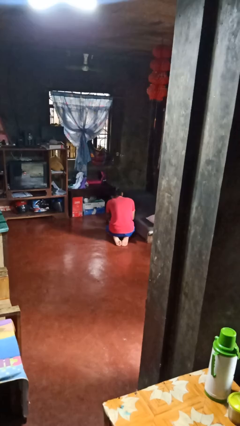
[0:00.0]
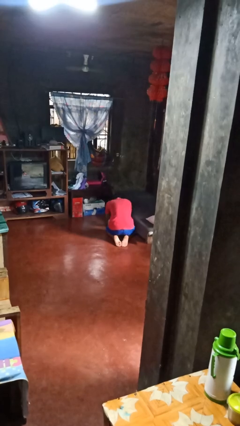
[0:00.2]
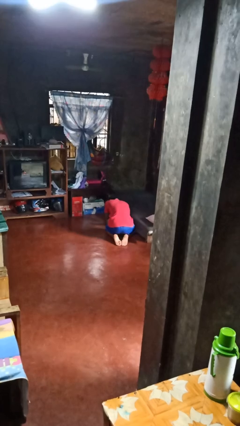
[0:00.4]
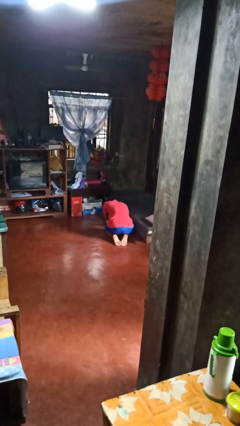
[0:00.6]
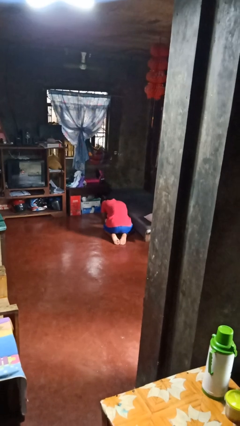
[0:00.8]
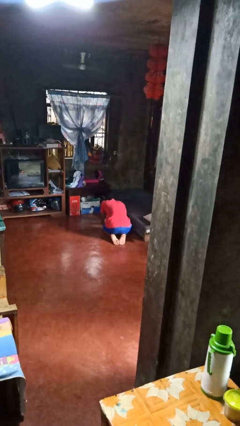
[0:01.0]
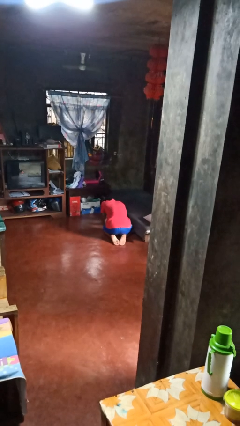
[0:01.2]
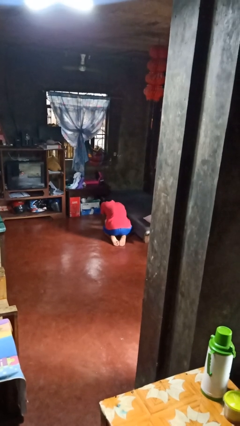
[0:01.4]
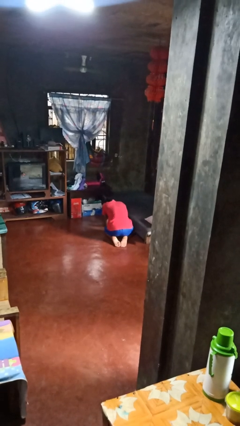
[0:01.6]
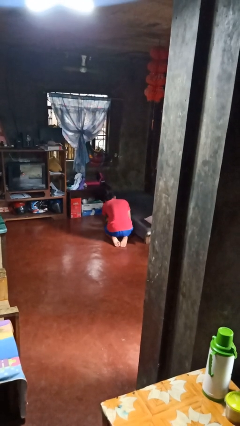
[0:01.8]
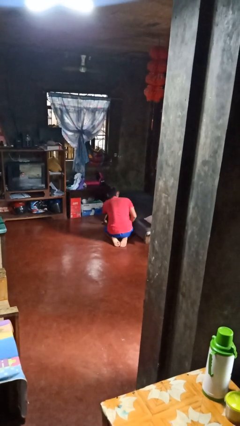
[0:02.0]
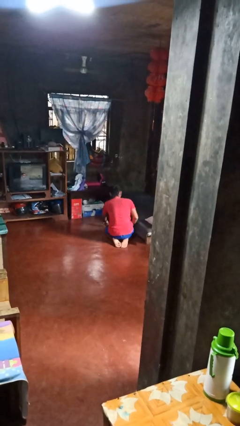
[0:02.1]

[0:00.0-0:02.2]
person searches under bed

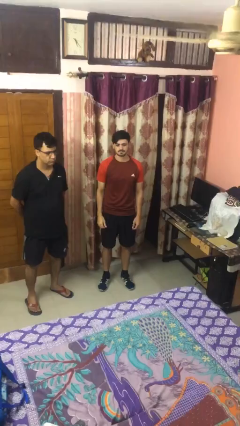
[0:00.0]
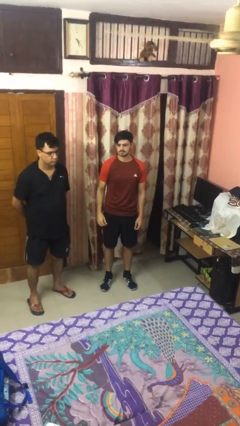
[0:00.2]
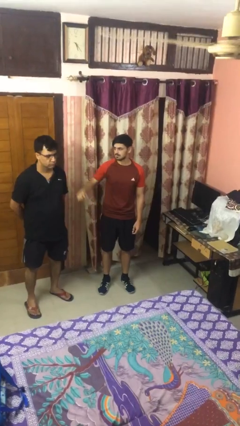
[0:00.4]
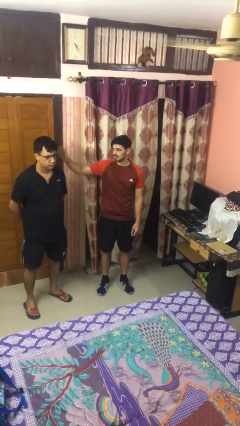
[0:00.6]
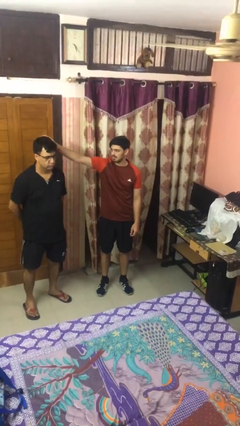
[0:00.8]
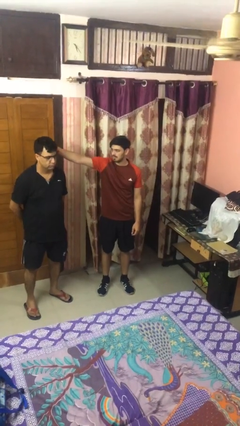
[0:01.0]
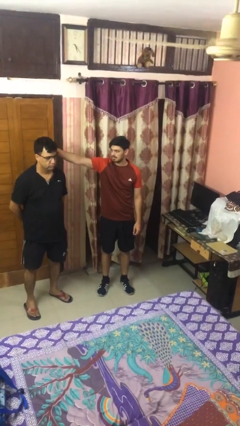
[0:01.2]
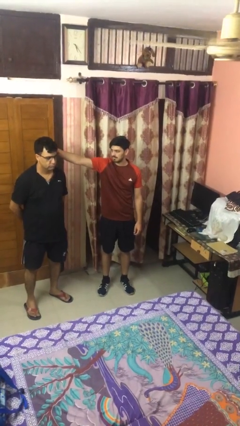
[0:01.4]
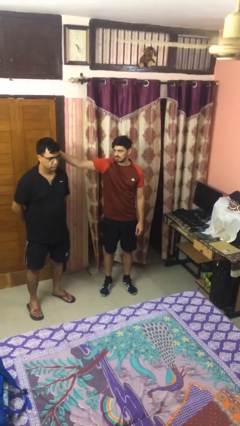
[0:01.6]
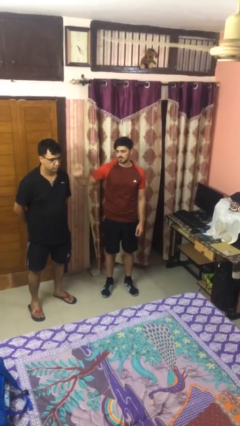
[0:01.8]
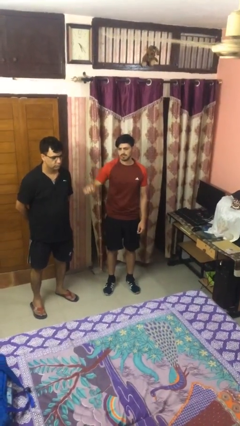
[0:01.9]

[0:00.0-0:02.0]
person grabs person by hair

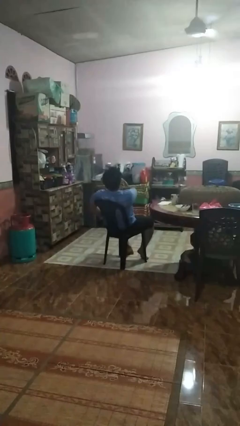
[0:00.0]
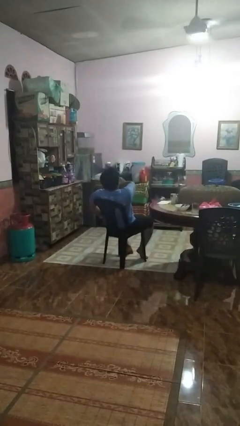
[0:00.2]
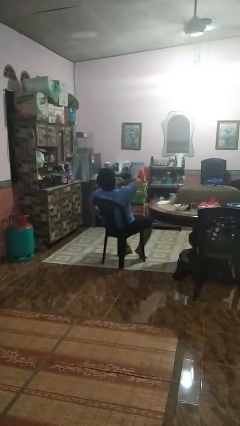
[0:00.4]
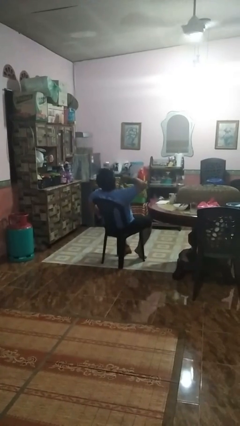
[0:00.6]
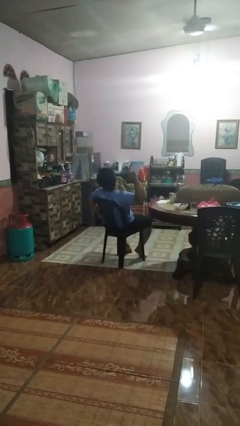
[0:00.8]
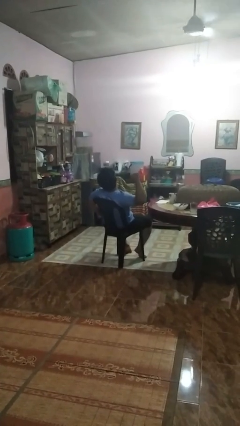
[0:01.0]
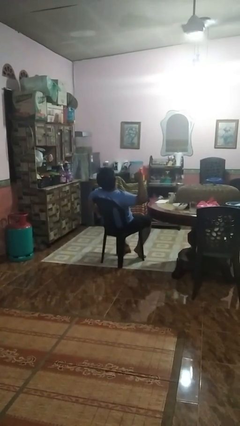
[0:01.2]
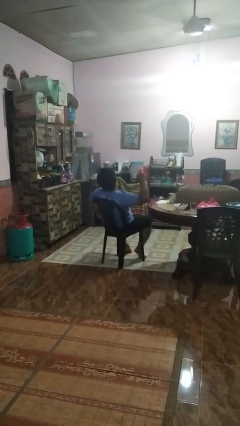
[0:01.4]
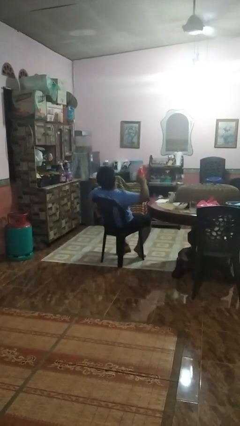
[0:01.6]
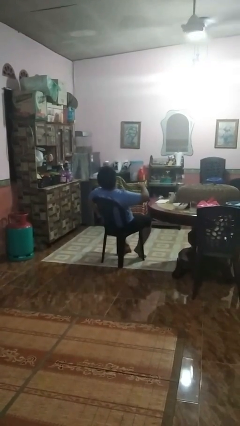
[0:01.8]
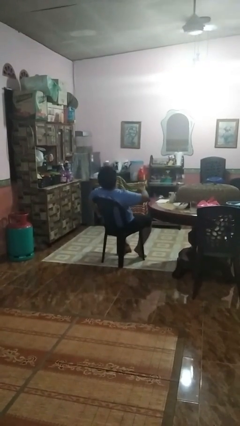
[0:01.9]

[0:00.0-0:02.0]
person gestures cut

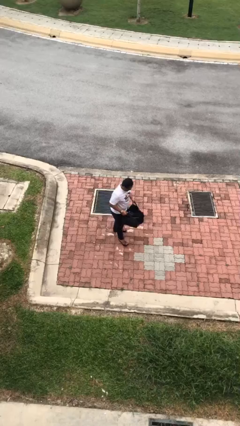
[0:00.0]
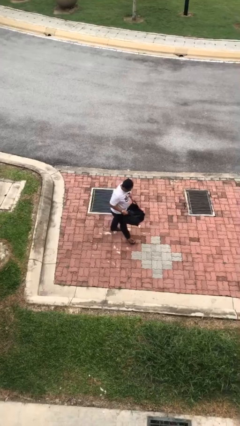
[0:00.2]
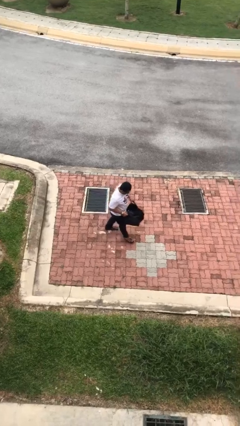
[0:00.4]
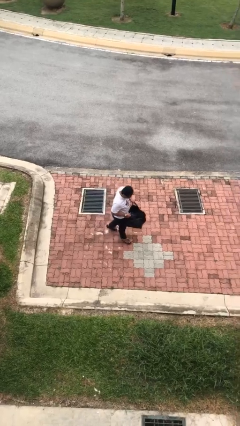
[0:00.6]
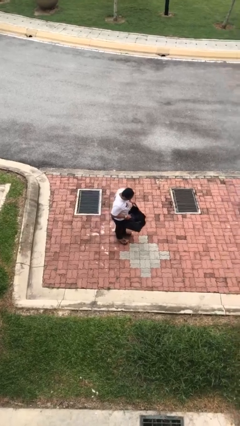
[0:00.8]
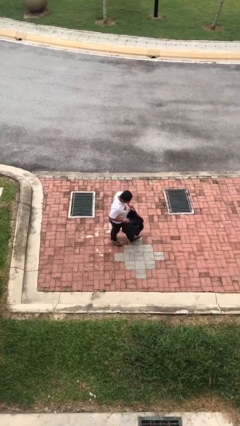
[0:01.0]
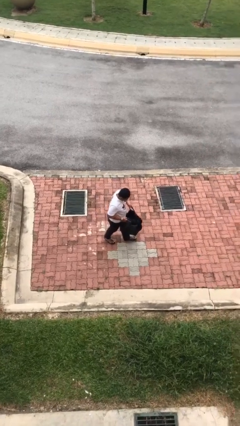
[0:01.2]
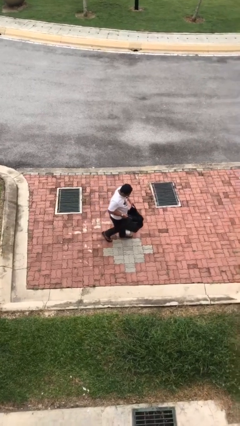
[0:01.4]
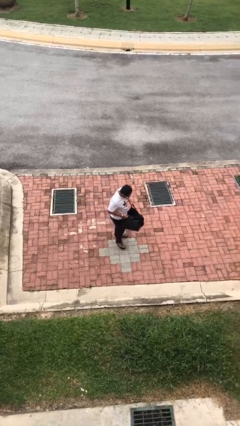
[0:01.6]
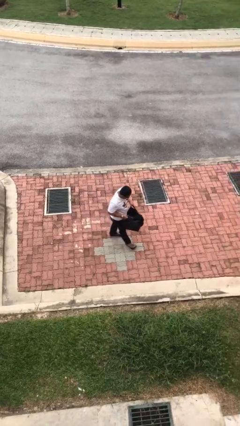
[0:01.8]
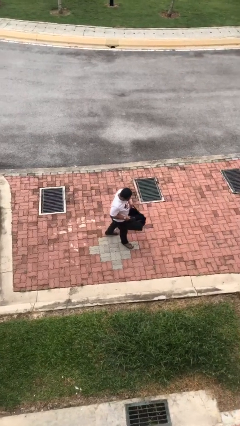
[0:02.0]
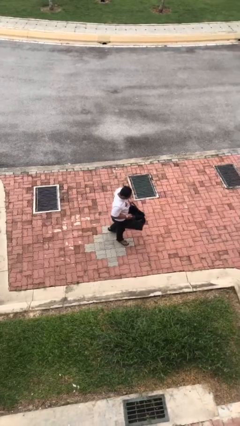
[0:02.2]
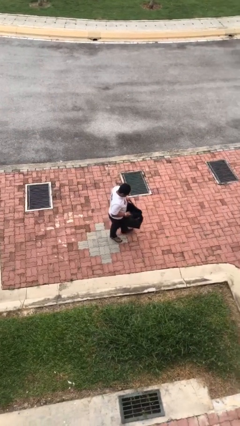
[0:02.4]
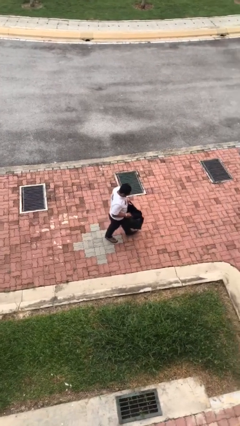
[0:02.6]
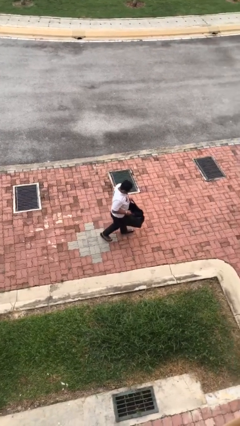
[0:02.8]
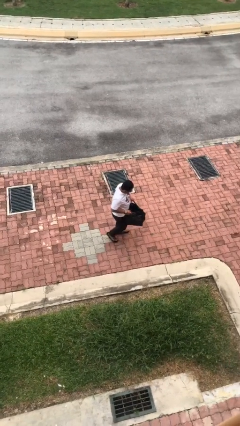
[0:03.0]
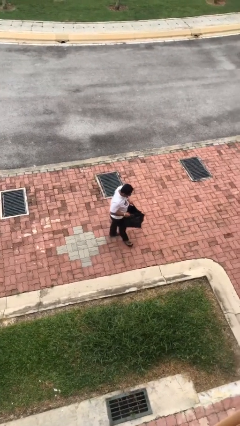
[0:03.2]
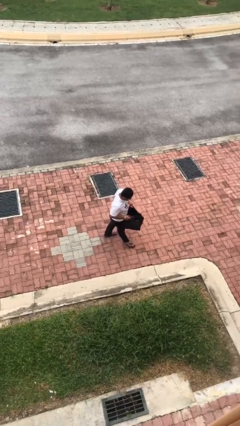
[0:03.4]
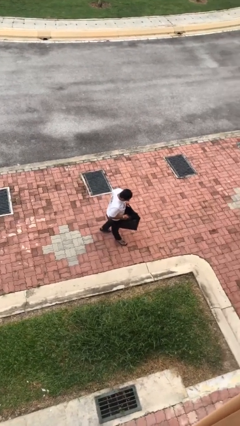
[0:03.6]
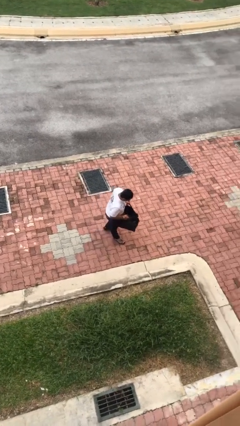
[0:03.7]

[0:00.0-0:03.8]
person carries heavy object

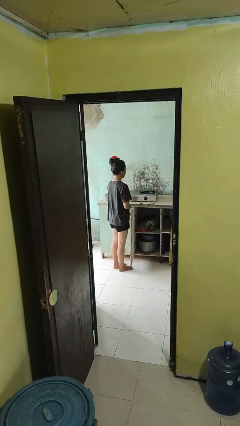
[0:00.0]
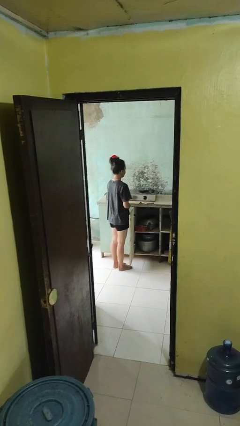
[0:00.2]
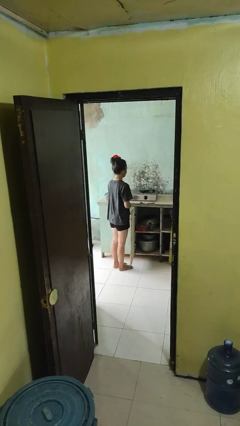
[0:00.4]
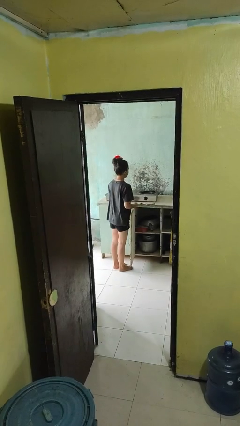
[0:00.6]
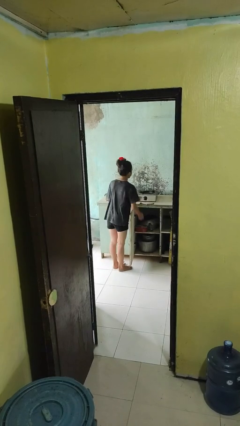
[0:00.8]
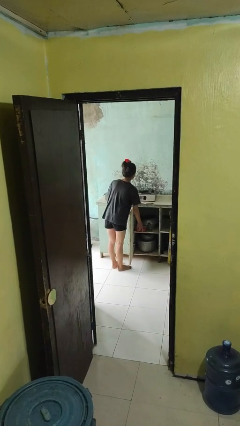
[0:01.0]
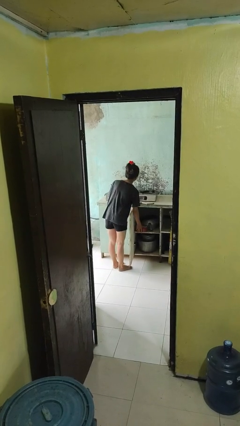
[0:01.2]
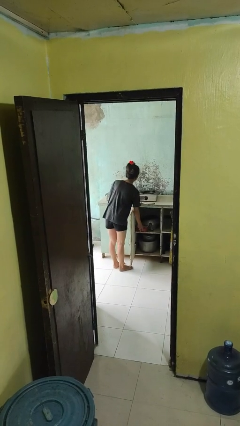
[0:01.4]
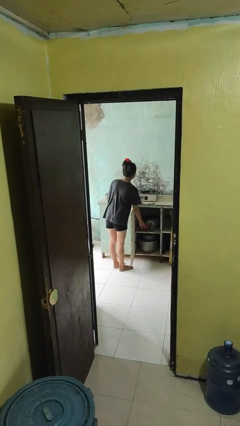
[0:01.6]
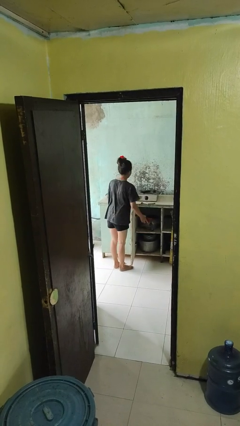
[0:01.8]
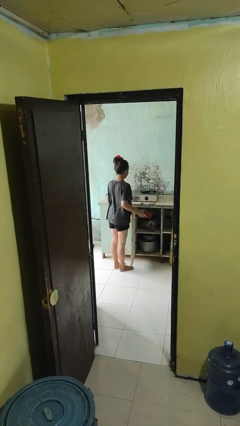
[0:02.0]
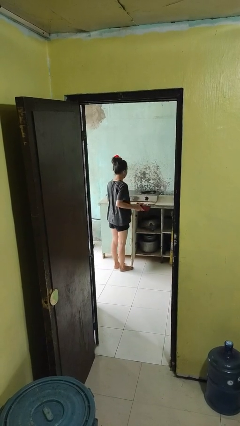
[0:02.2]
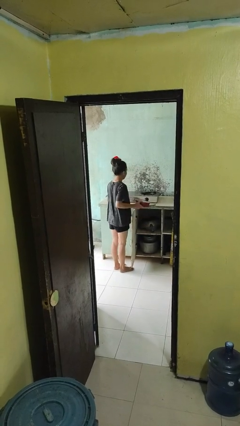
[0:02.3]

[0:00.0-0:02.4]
person takes object from cabinet

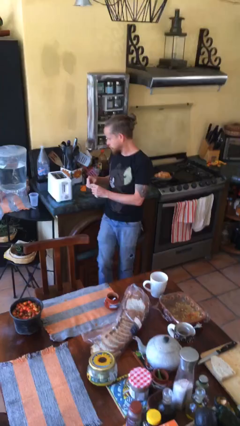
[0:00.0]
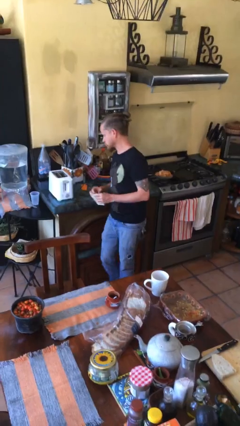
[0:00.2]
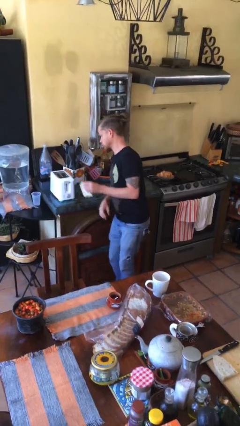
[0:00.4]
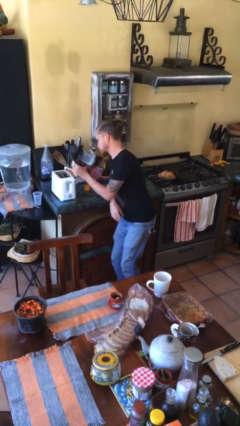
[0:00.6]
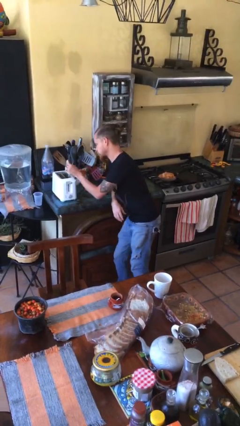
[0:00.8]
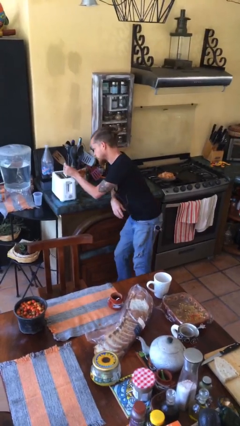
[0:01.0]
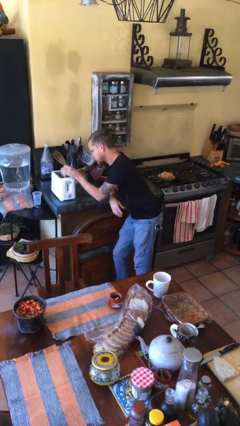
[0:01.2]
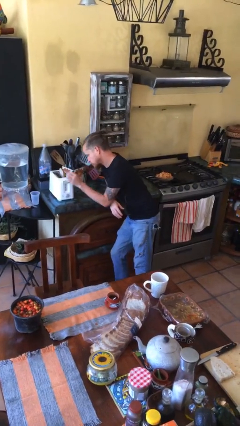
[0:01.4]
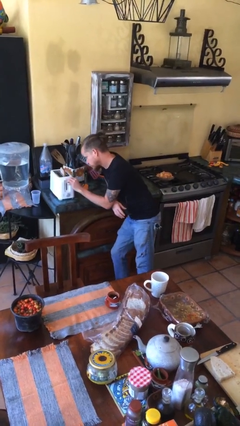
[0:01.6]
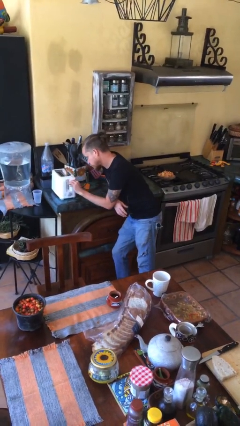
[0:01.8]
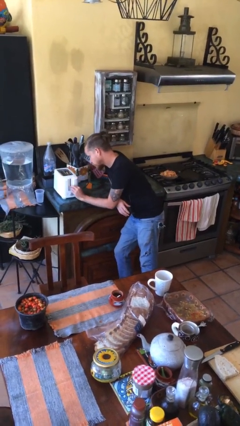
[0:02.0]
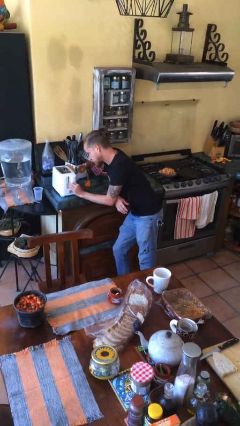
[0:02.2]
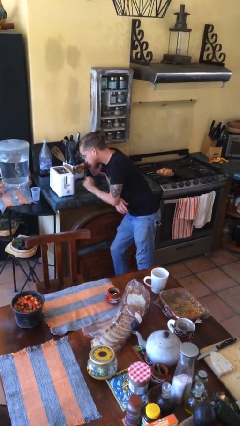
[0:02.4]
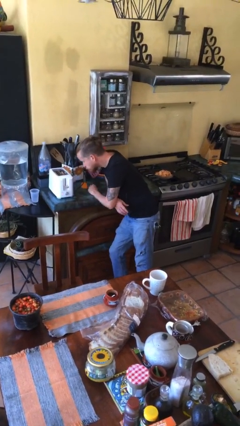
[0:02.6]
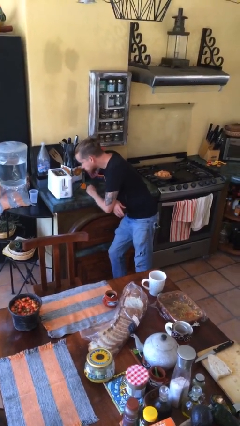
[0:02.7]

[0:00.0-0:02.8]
person puts object into toaster

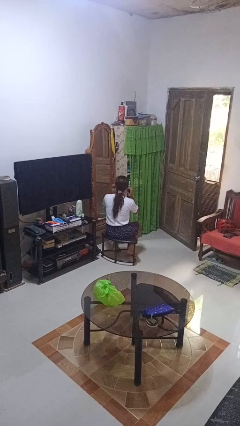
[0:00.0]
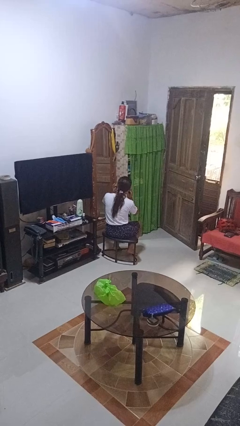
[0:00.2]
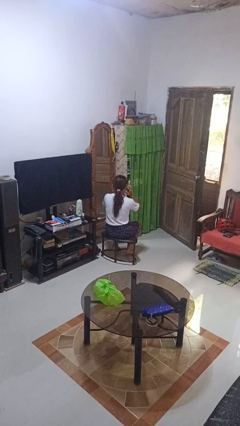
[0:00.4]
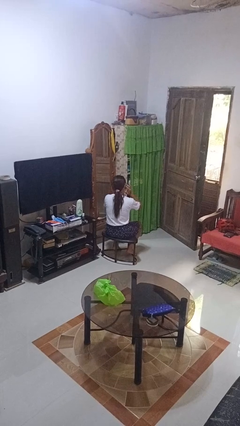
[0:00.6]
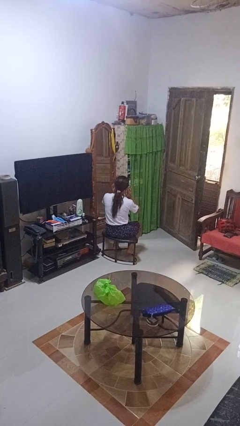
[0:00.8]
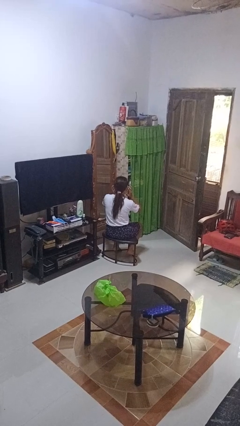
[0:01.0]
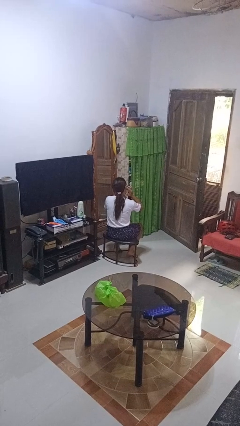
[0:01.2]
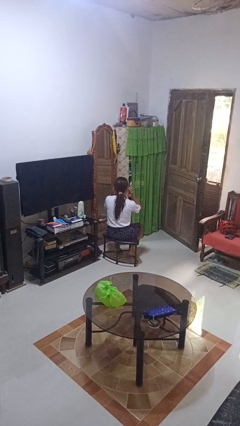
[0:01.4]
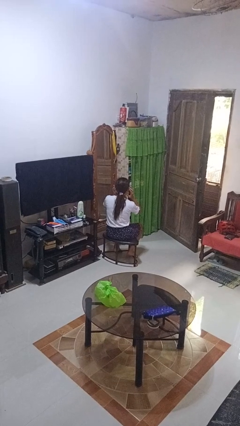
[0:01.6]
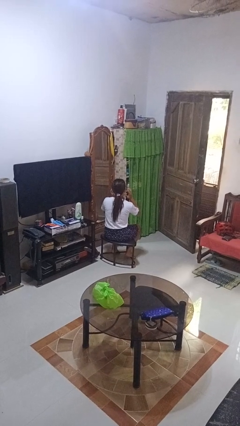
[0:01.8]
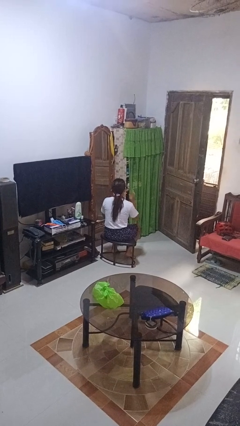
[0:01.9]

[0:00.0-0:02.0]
person puts fingers in ear

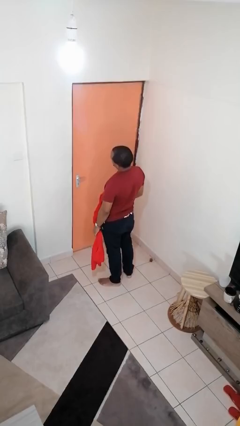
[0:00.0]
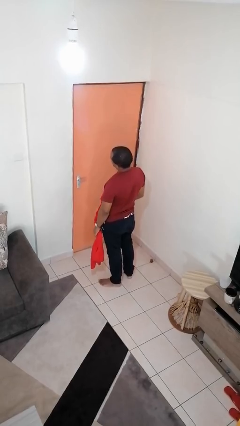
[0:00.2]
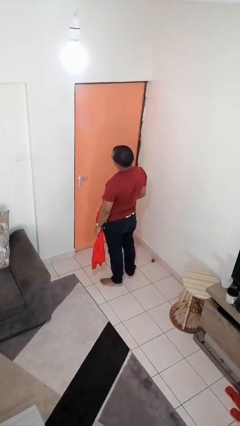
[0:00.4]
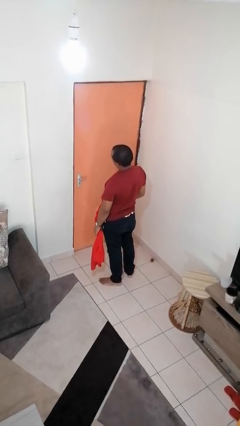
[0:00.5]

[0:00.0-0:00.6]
person dries hair with towel
